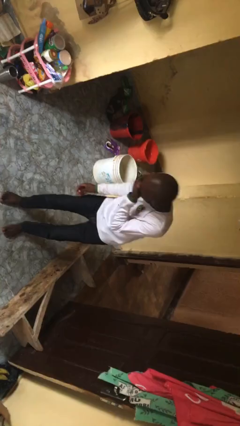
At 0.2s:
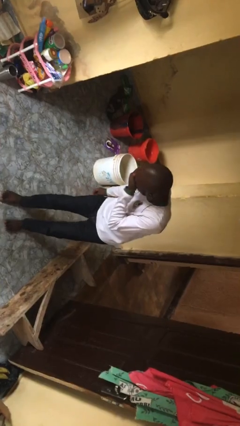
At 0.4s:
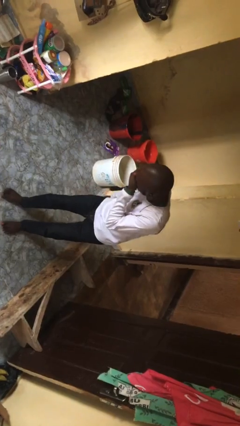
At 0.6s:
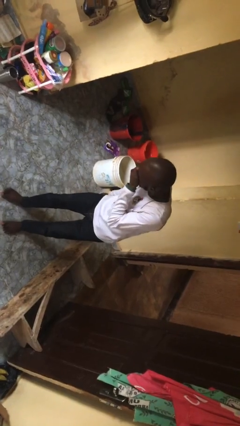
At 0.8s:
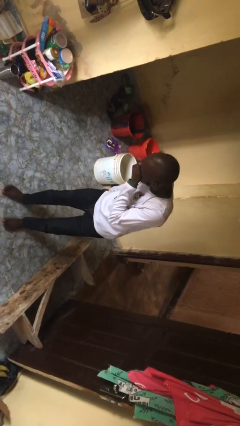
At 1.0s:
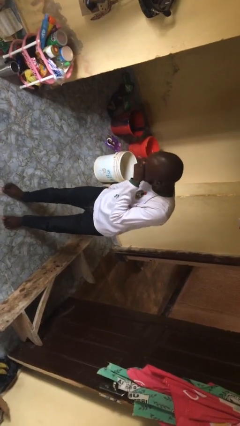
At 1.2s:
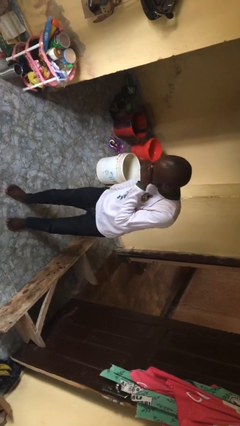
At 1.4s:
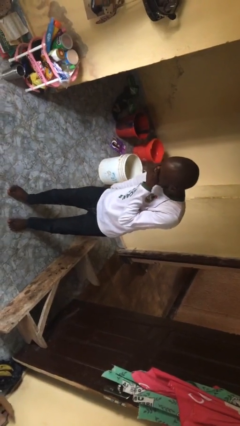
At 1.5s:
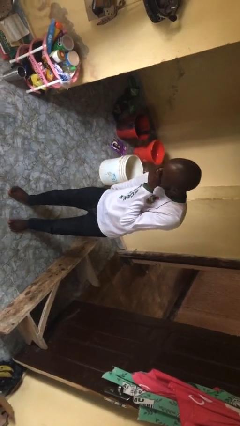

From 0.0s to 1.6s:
person sneezes into hand

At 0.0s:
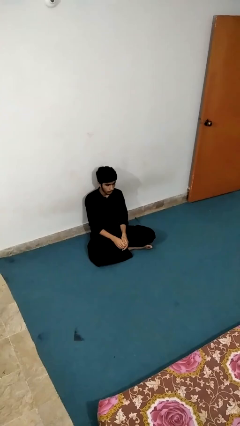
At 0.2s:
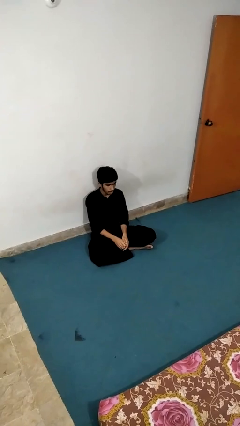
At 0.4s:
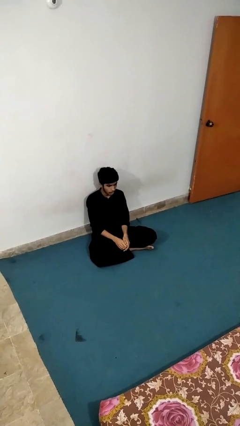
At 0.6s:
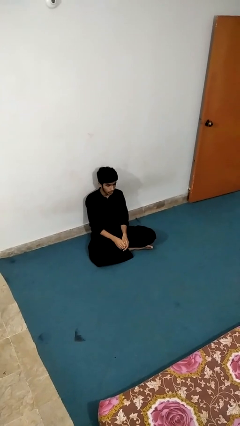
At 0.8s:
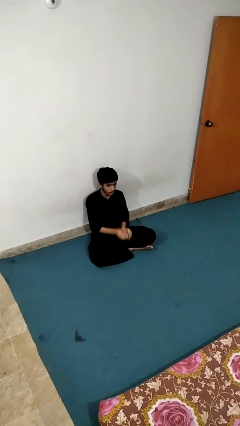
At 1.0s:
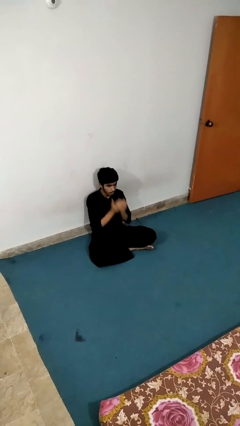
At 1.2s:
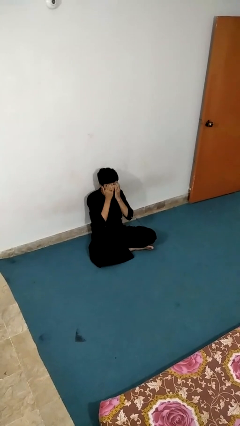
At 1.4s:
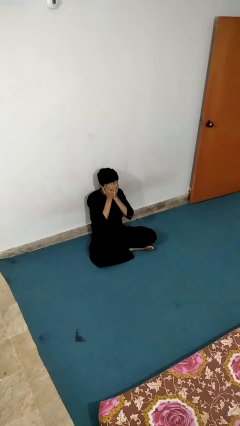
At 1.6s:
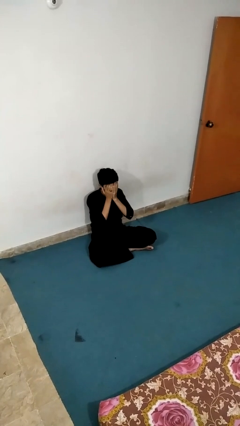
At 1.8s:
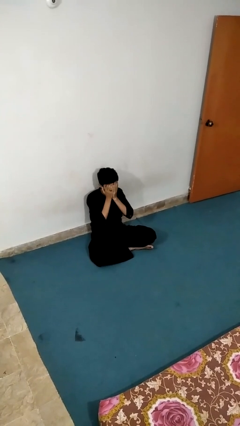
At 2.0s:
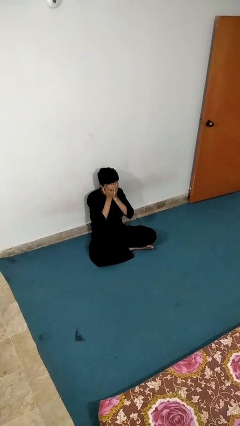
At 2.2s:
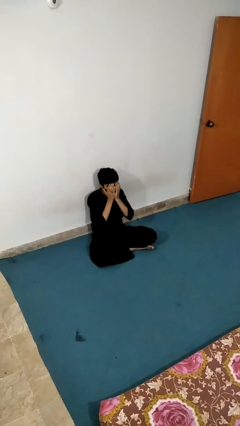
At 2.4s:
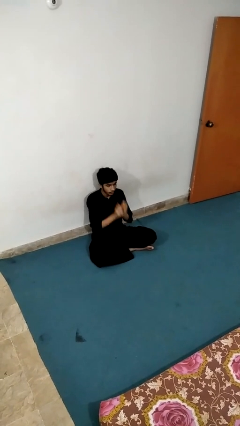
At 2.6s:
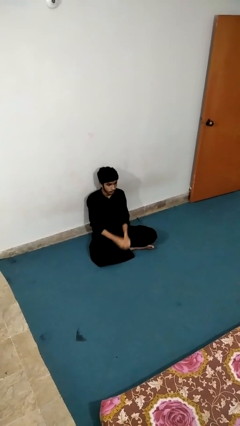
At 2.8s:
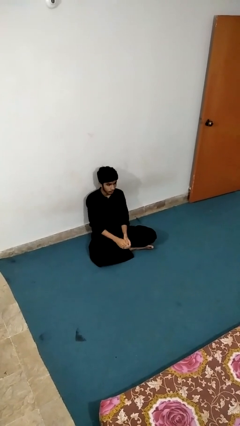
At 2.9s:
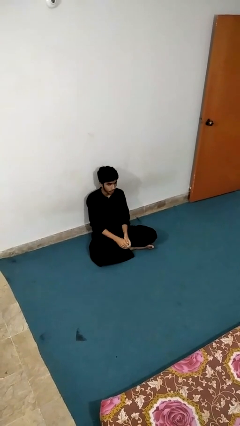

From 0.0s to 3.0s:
person covers face with hands

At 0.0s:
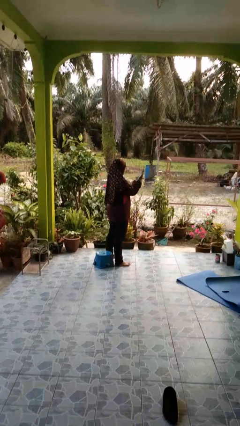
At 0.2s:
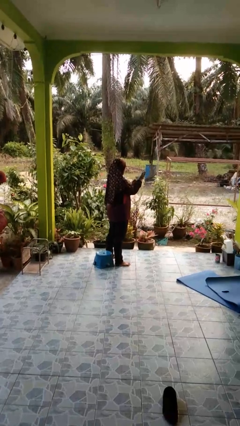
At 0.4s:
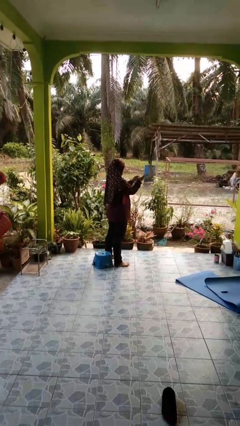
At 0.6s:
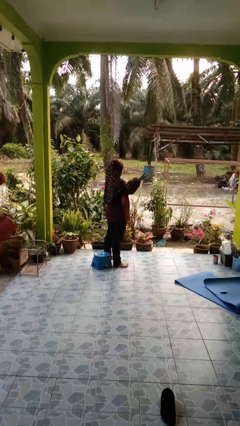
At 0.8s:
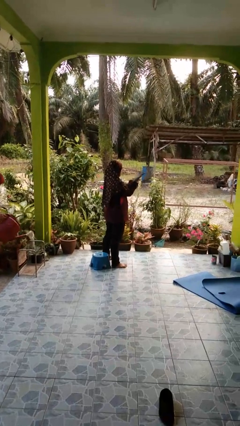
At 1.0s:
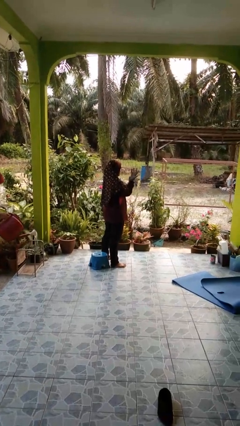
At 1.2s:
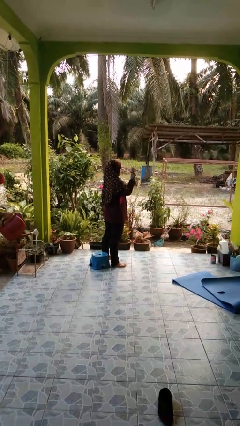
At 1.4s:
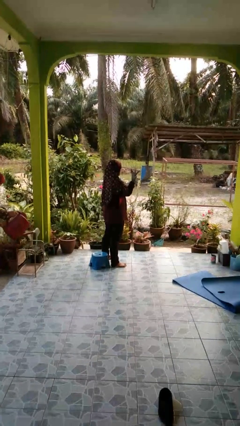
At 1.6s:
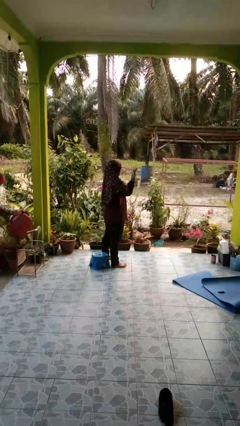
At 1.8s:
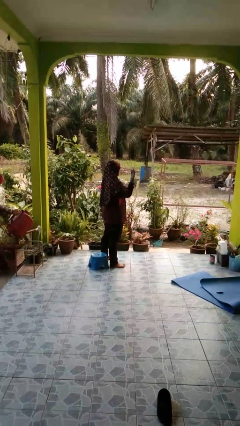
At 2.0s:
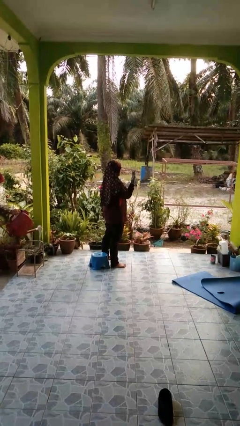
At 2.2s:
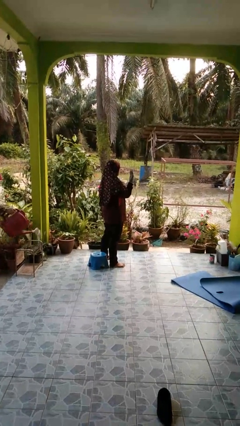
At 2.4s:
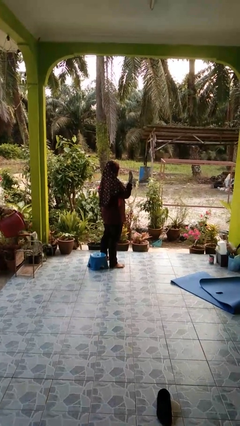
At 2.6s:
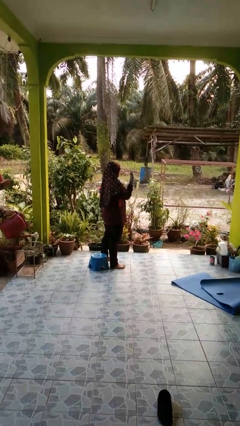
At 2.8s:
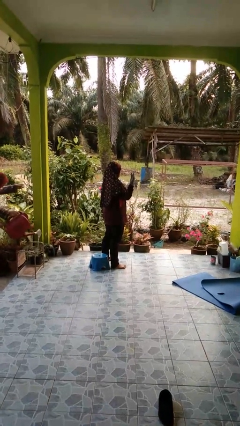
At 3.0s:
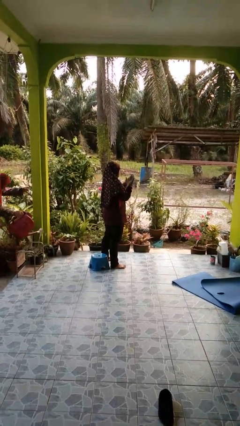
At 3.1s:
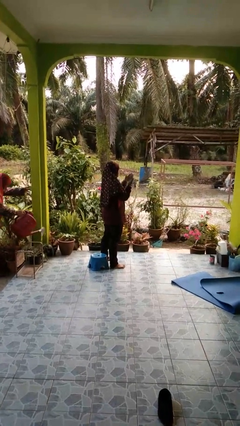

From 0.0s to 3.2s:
person puts on gloves

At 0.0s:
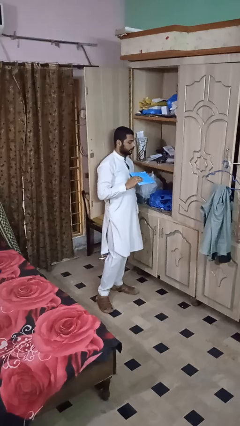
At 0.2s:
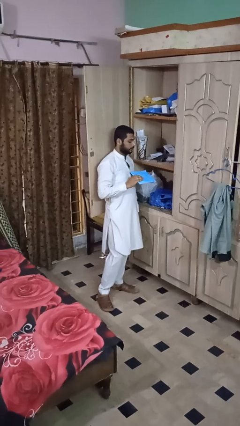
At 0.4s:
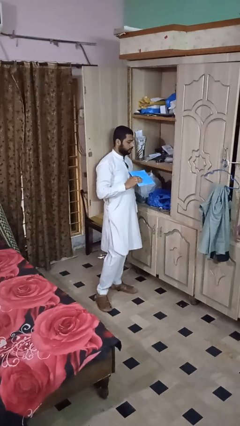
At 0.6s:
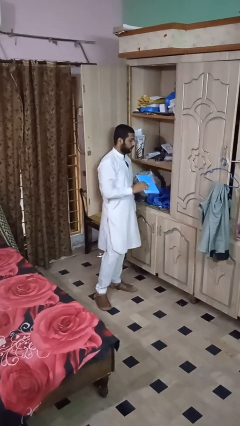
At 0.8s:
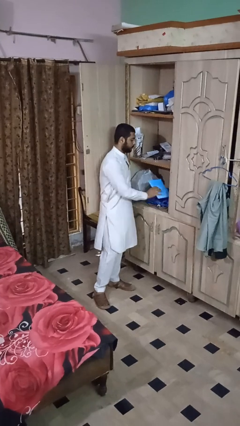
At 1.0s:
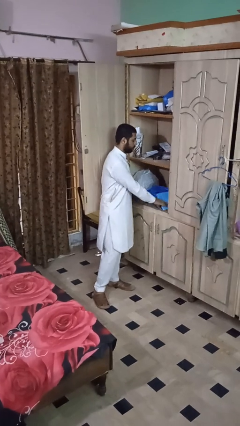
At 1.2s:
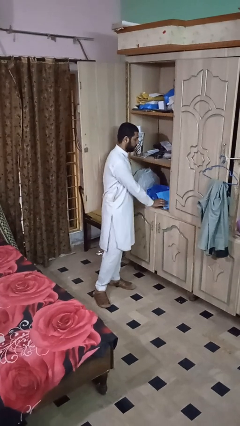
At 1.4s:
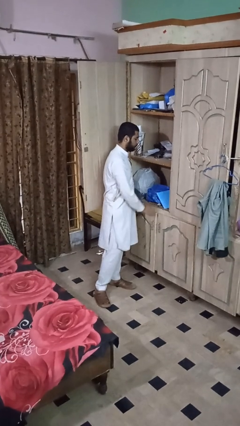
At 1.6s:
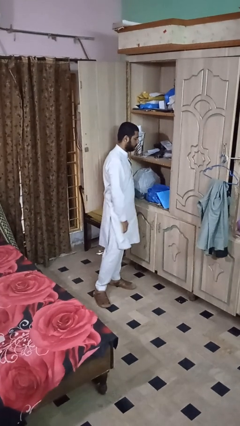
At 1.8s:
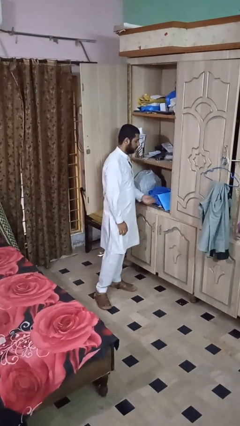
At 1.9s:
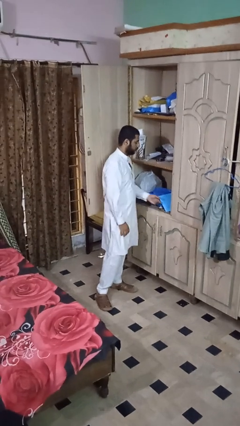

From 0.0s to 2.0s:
person puts down object on shelf

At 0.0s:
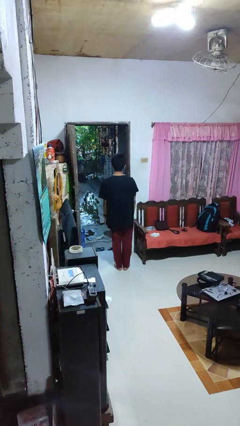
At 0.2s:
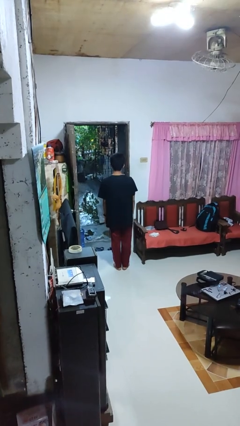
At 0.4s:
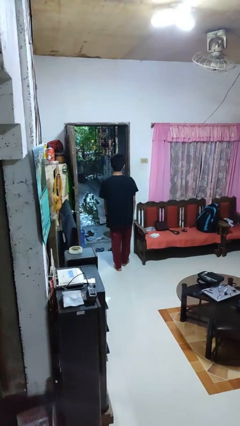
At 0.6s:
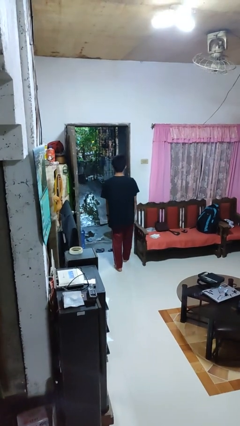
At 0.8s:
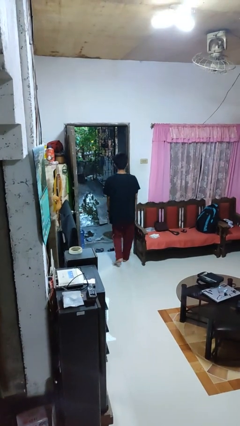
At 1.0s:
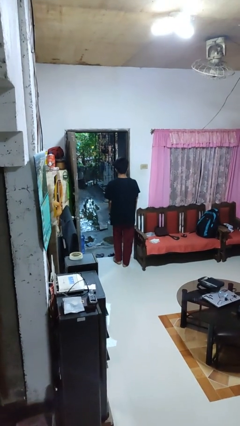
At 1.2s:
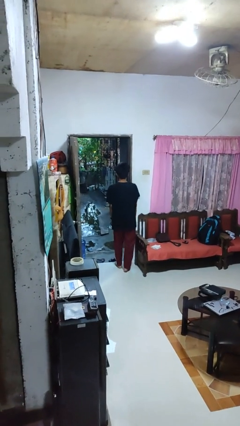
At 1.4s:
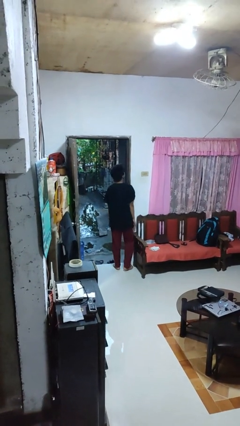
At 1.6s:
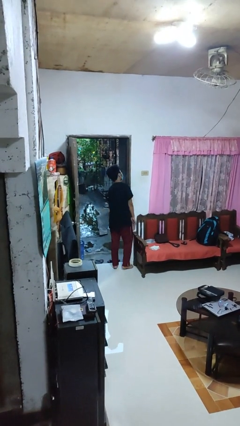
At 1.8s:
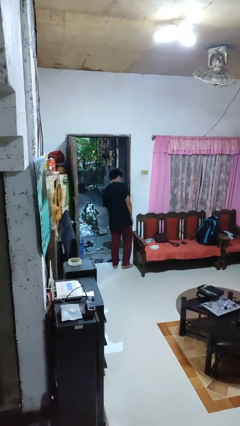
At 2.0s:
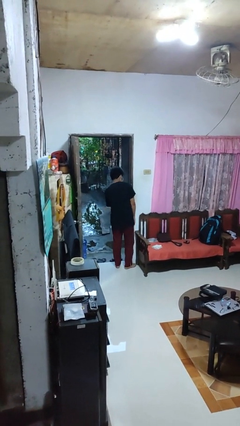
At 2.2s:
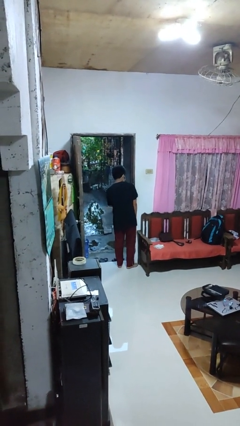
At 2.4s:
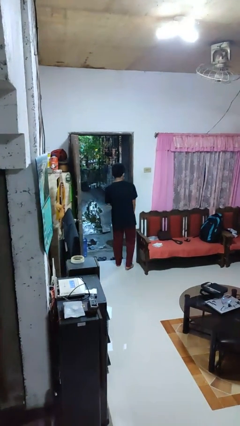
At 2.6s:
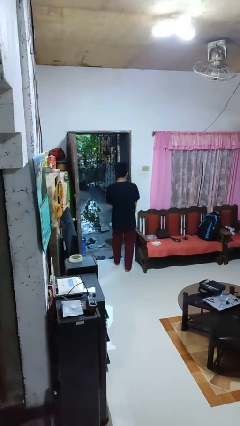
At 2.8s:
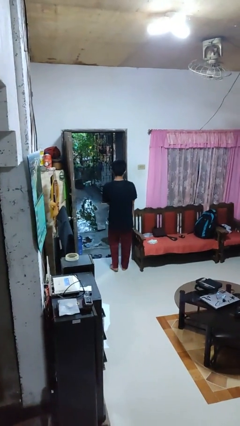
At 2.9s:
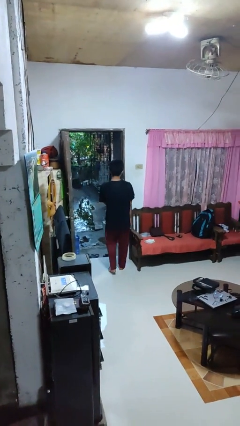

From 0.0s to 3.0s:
person bumps into wall

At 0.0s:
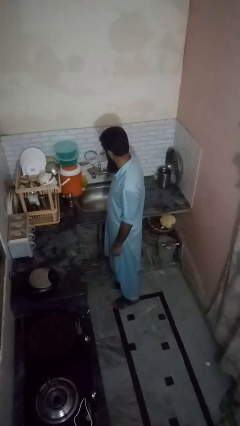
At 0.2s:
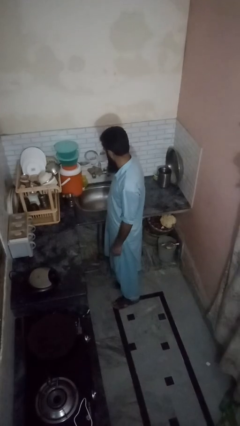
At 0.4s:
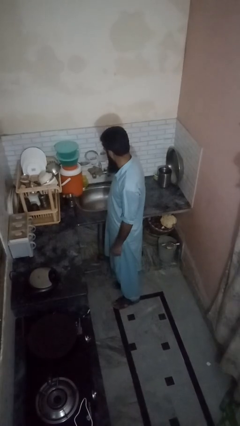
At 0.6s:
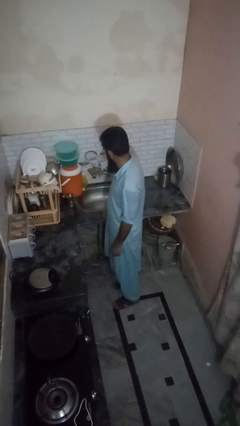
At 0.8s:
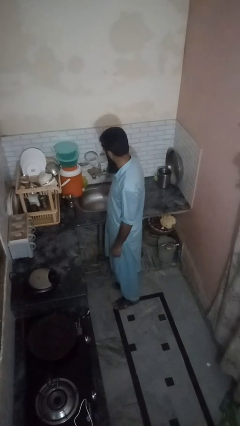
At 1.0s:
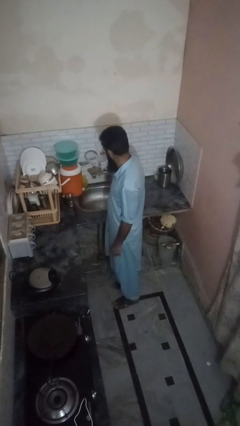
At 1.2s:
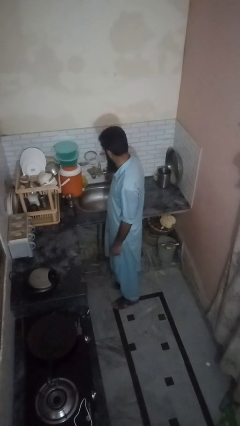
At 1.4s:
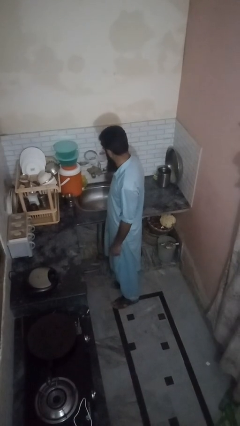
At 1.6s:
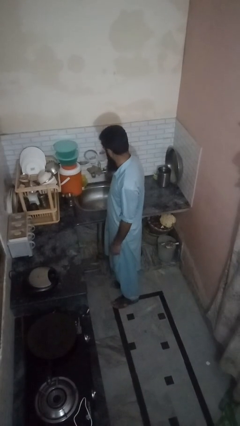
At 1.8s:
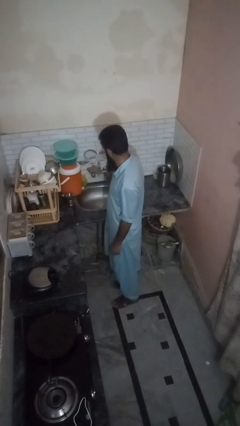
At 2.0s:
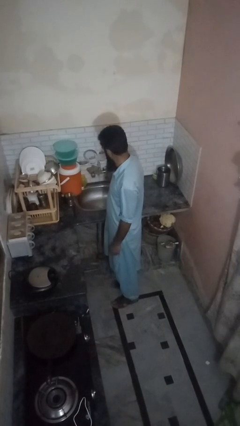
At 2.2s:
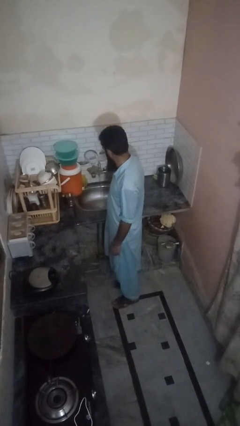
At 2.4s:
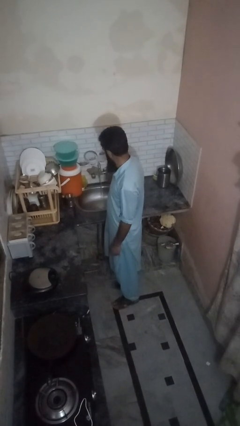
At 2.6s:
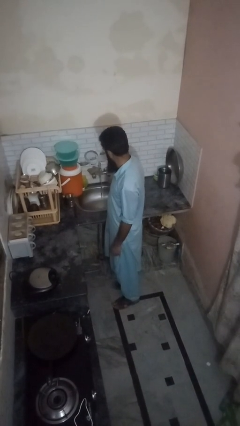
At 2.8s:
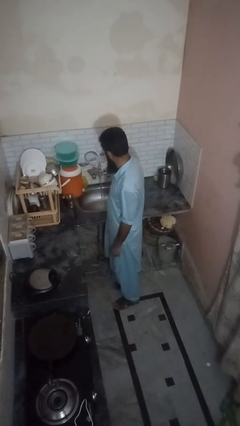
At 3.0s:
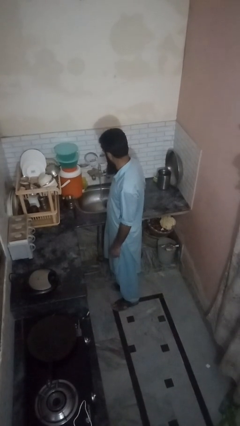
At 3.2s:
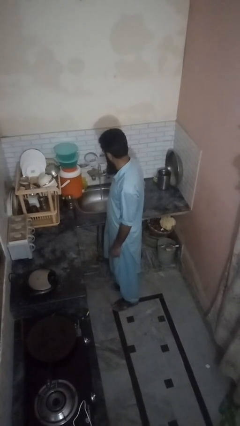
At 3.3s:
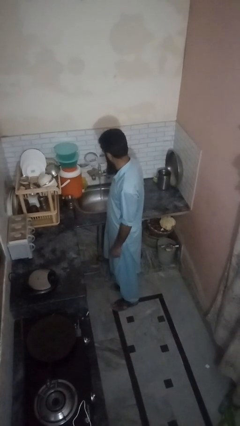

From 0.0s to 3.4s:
person turns on faucet

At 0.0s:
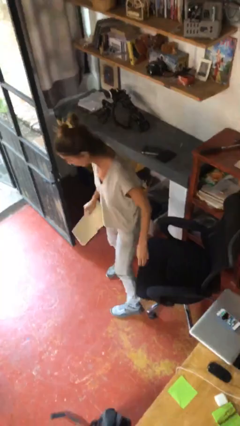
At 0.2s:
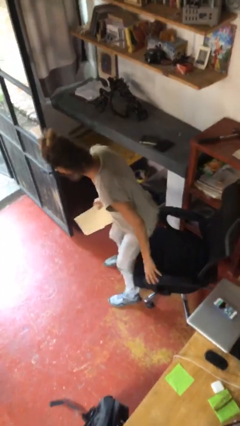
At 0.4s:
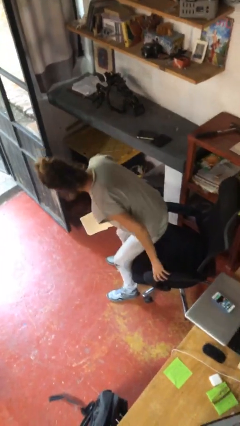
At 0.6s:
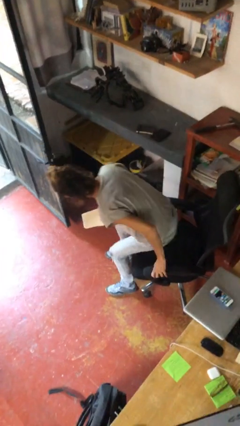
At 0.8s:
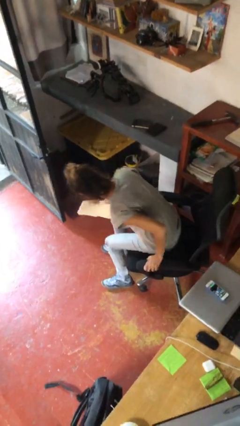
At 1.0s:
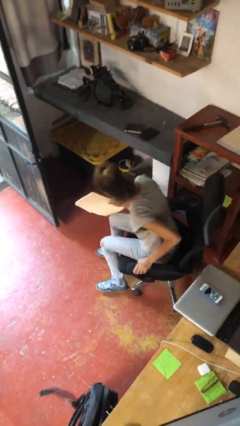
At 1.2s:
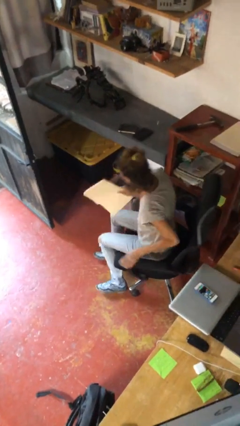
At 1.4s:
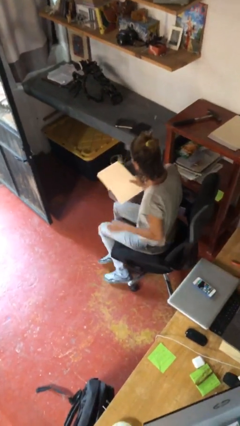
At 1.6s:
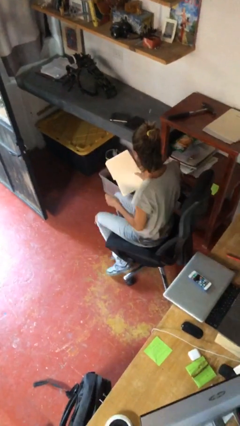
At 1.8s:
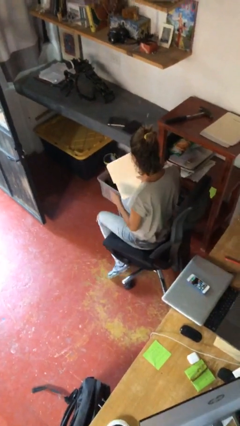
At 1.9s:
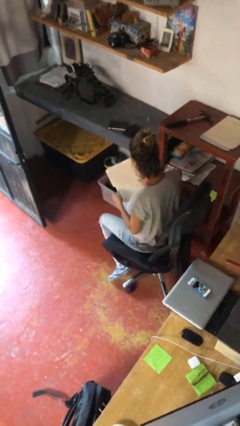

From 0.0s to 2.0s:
person sits down
